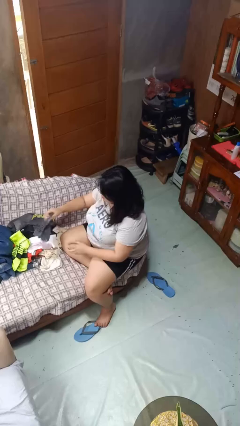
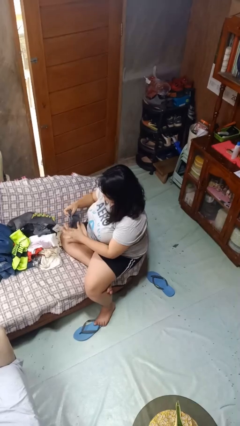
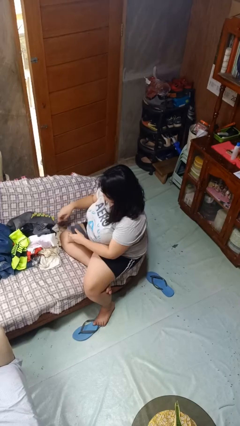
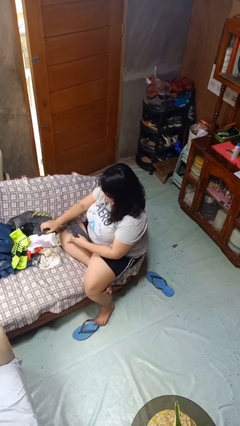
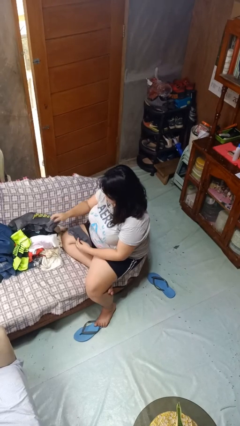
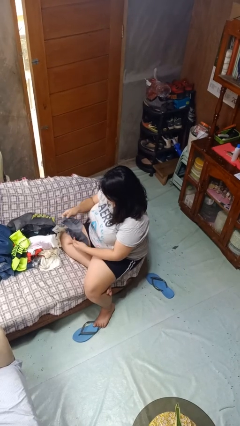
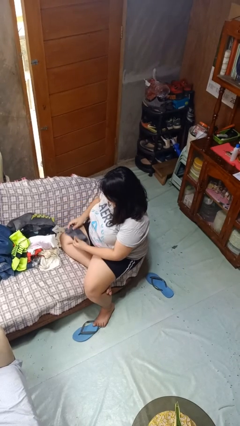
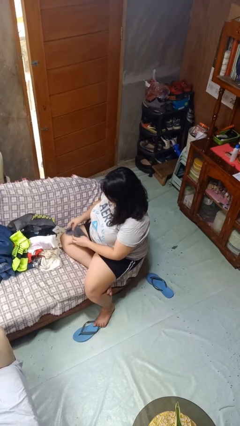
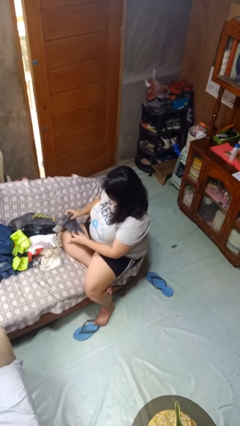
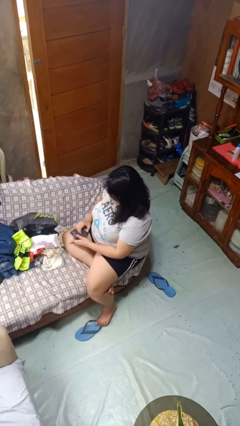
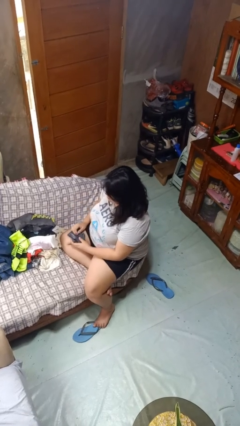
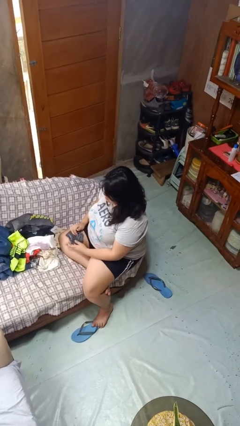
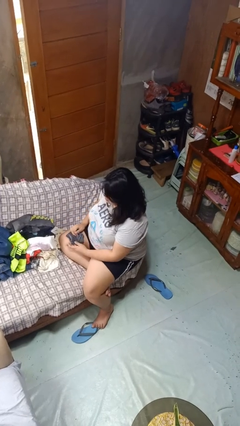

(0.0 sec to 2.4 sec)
person folds socks

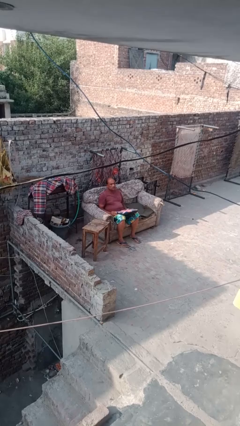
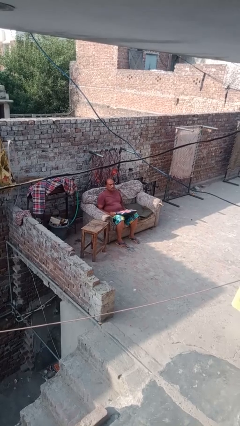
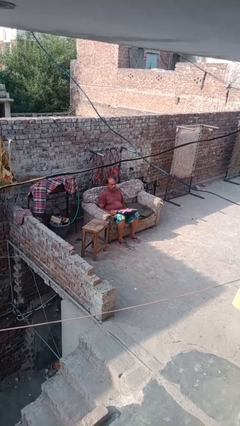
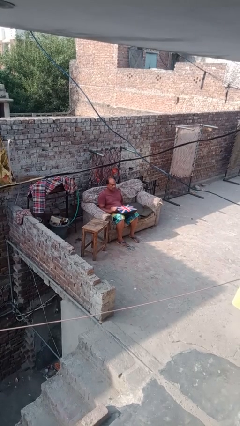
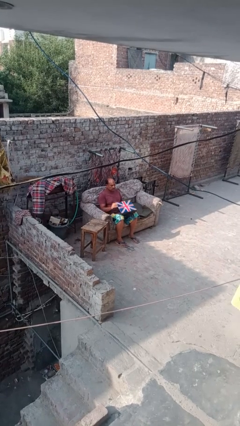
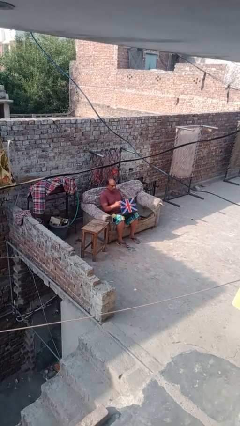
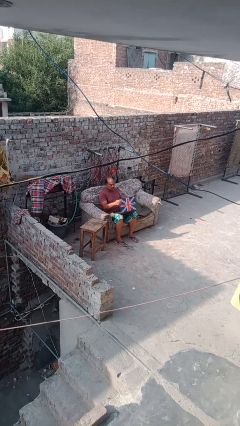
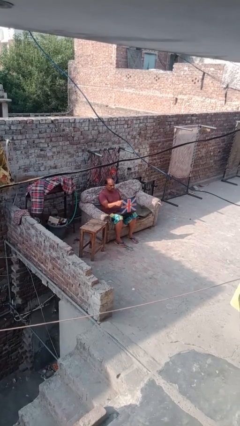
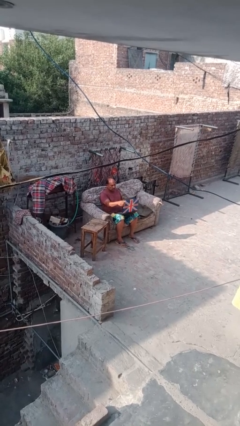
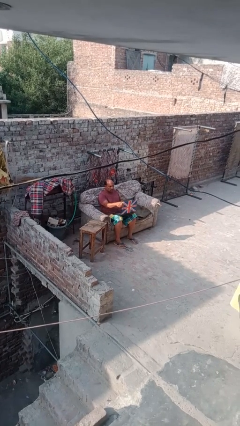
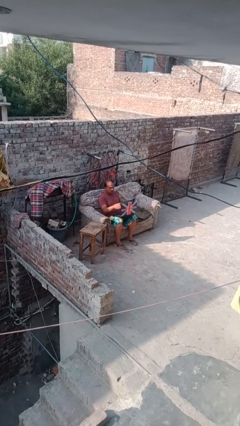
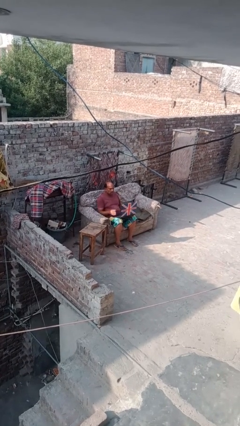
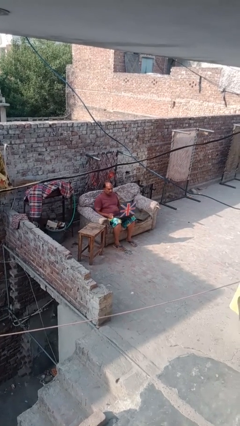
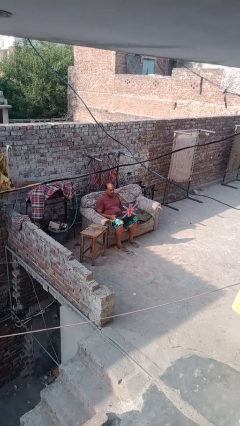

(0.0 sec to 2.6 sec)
person opens laptop

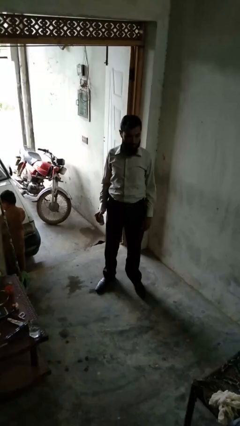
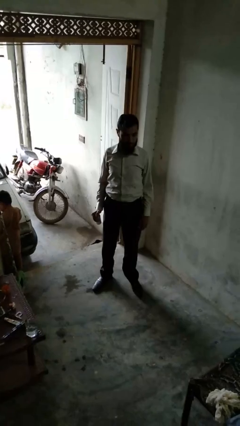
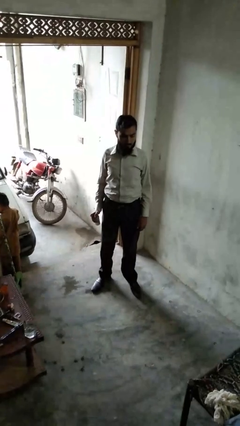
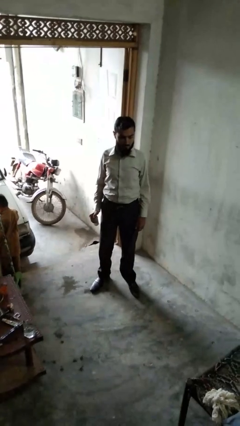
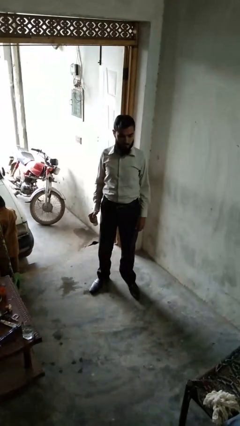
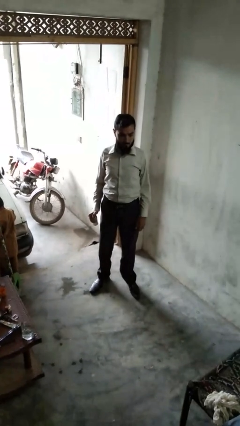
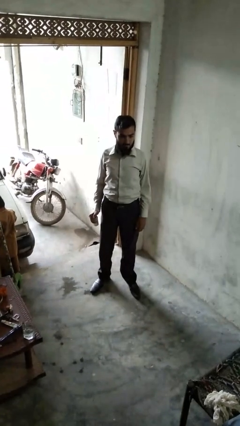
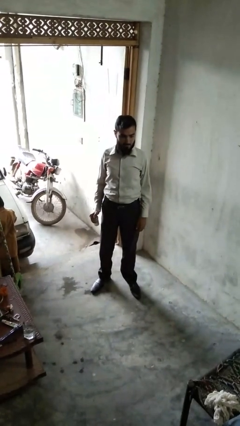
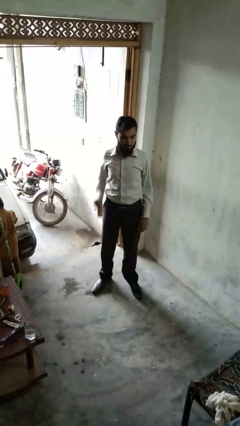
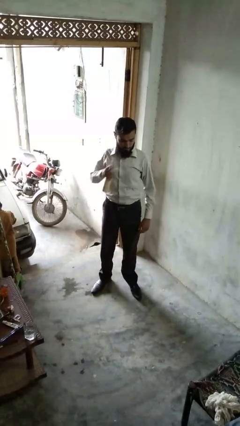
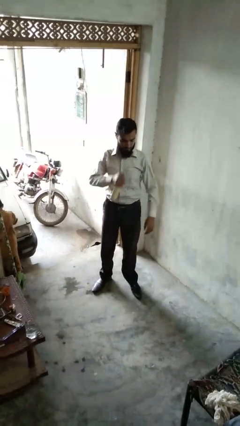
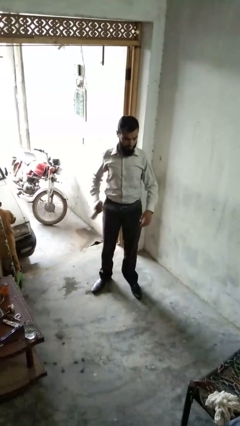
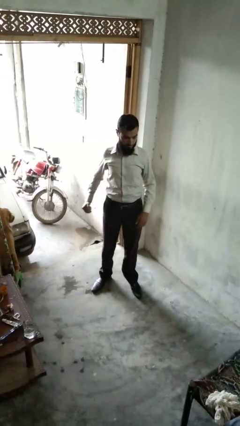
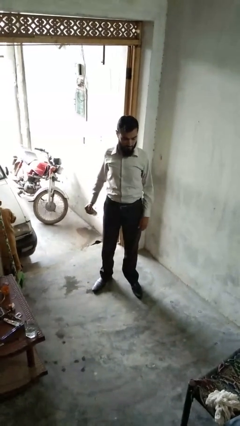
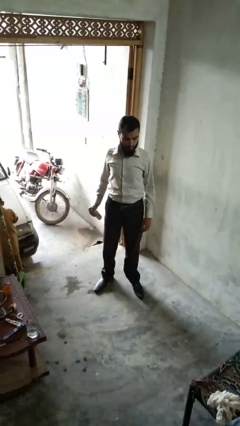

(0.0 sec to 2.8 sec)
person applies deodorant

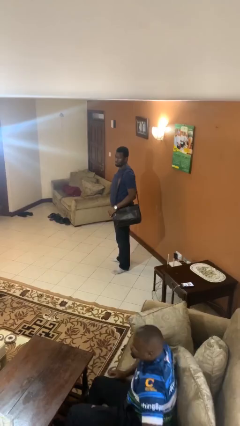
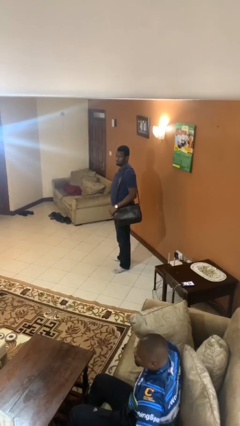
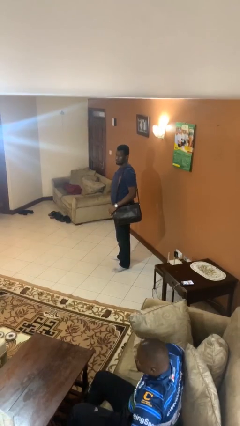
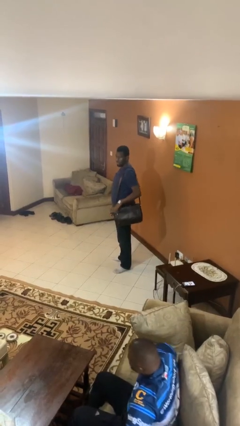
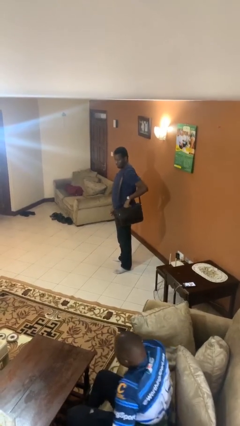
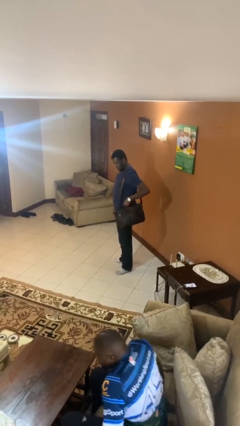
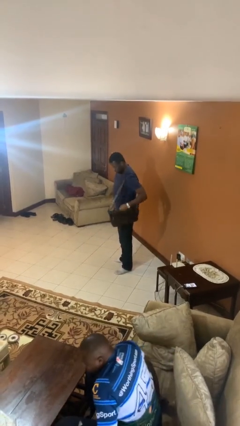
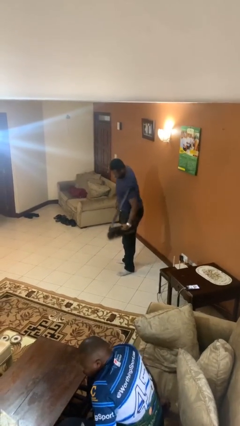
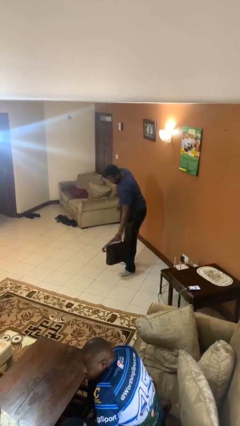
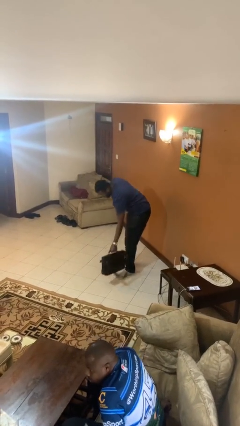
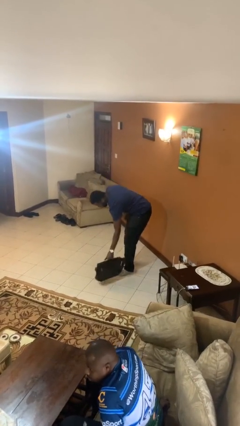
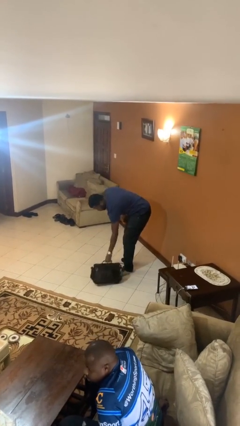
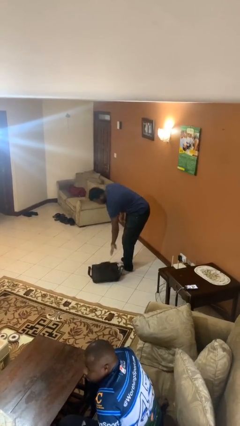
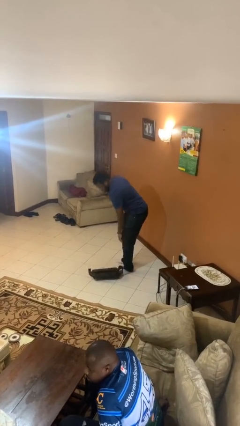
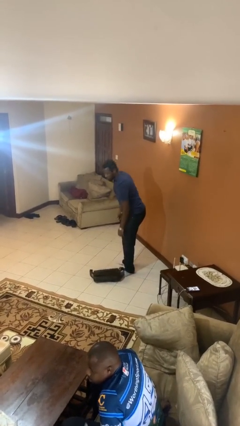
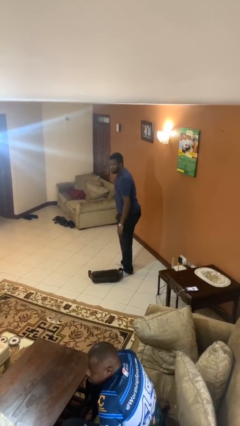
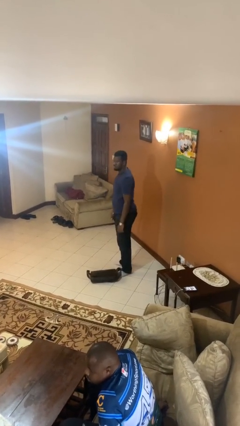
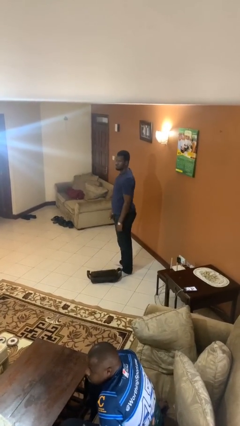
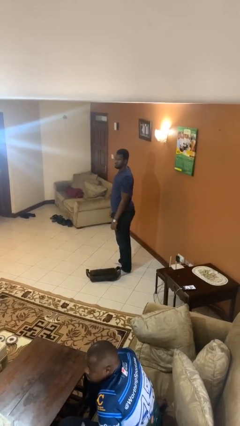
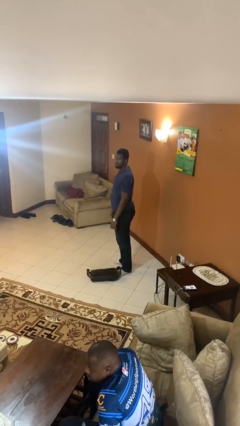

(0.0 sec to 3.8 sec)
person puts down object on floor

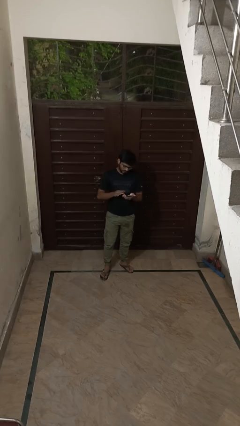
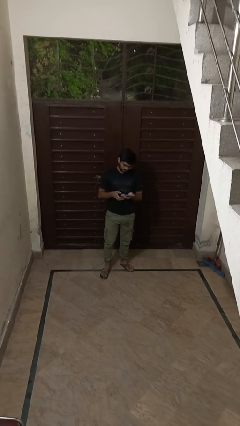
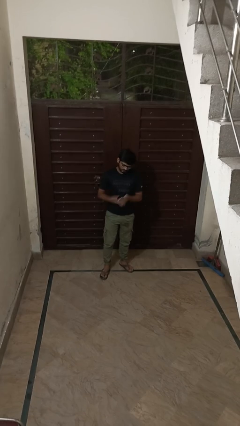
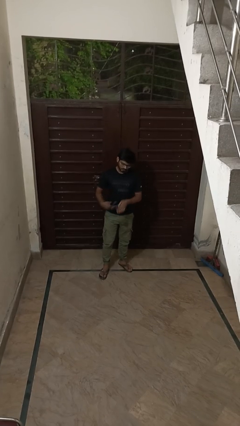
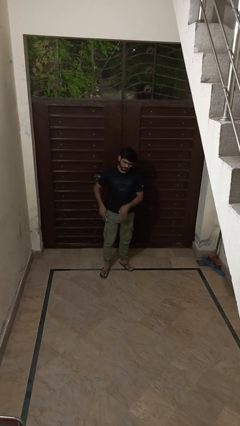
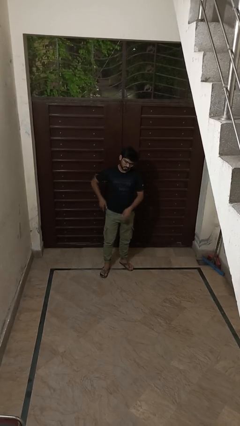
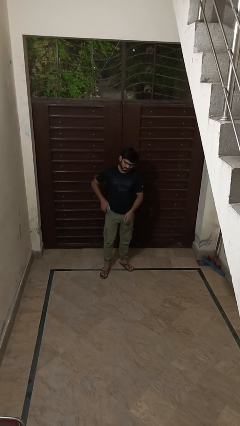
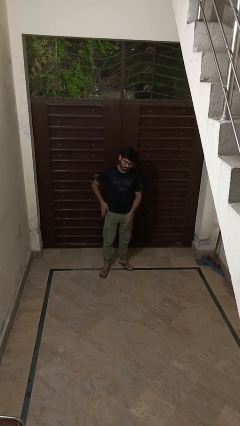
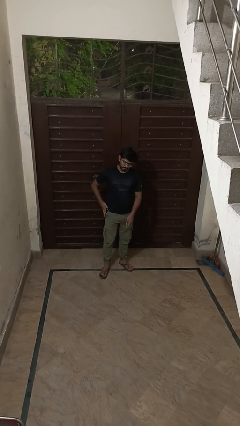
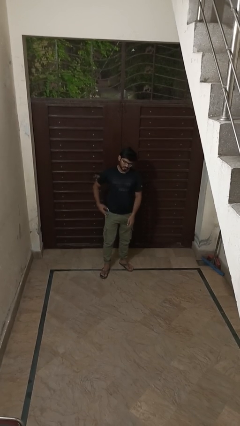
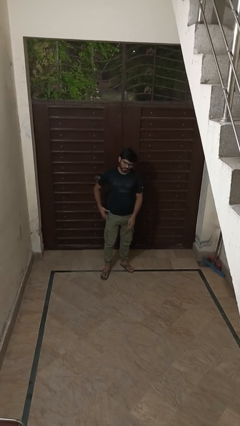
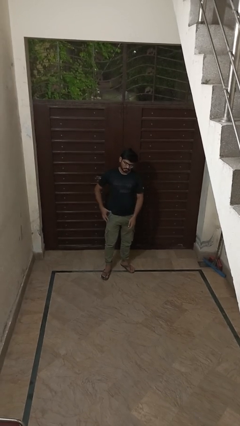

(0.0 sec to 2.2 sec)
person puts phone into pocket

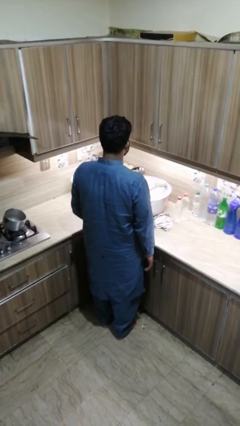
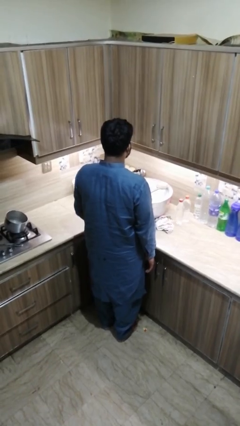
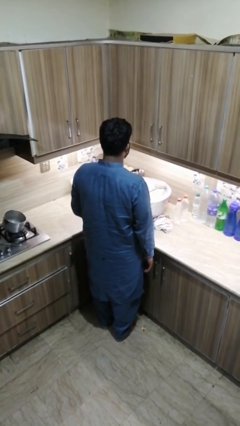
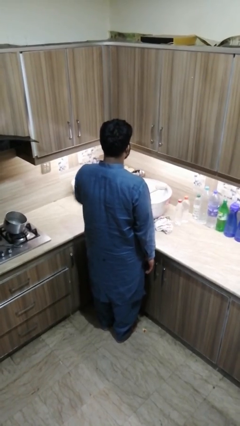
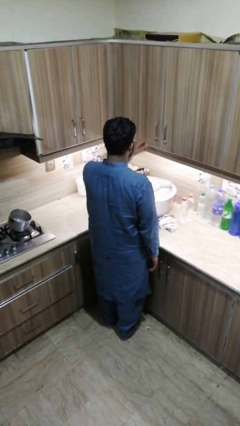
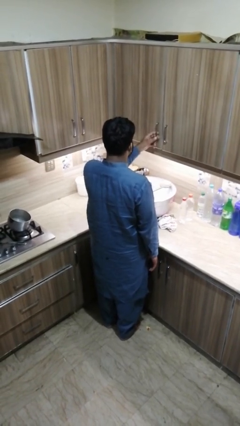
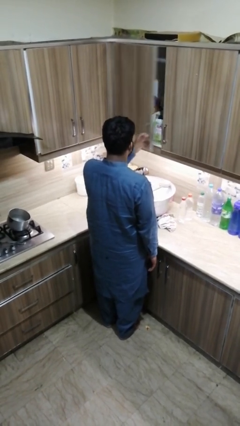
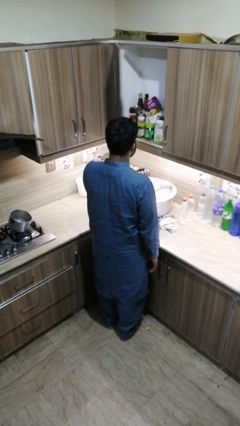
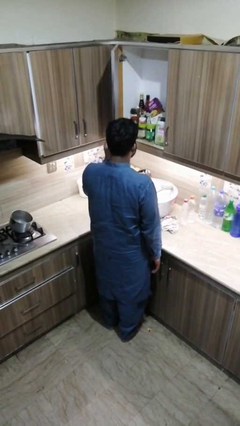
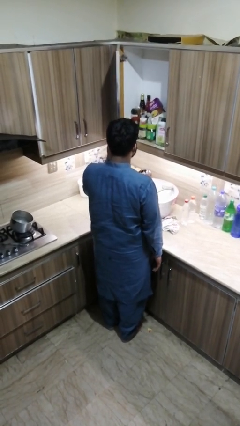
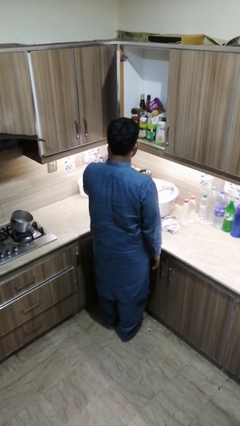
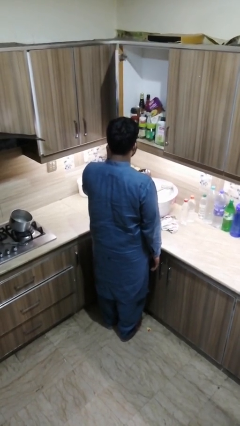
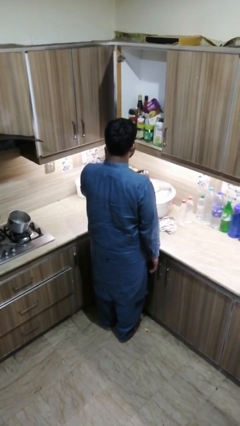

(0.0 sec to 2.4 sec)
person opens kitchen drawer

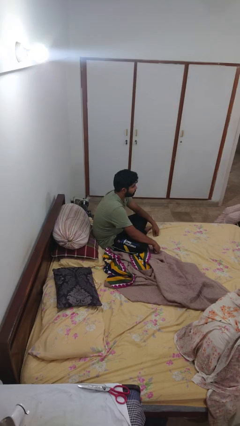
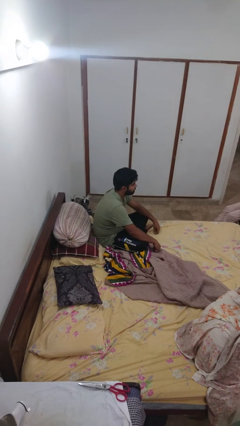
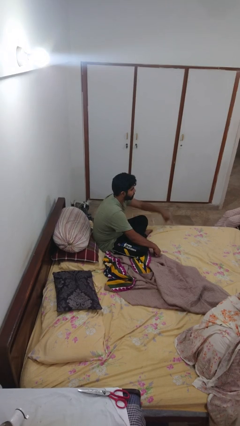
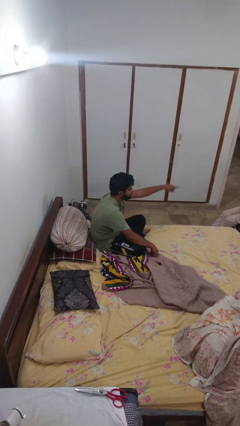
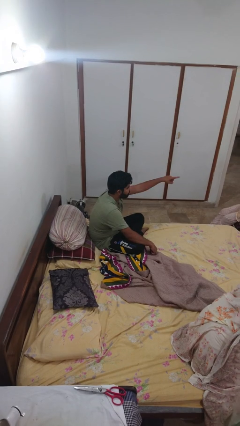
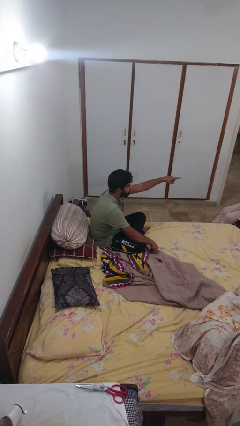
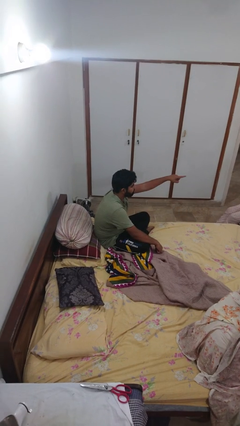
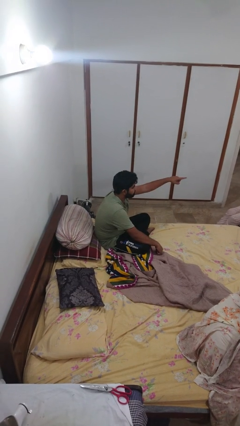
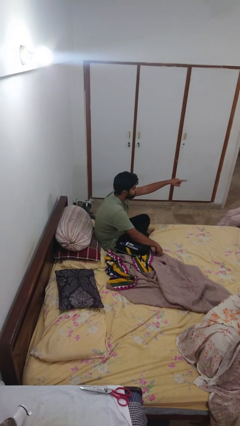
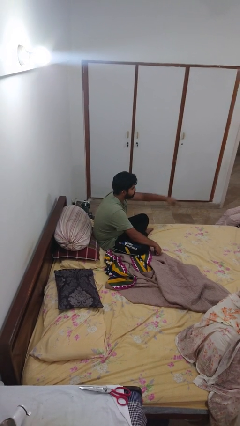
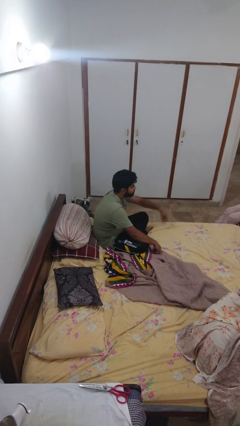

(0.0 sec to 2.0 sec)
person points at person
